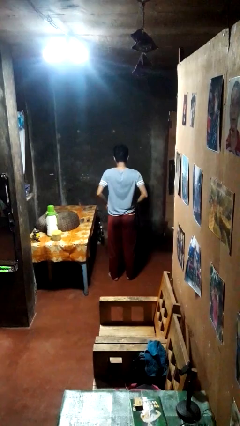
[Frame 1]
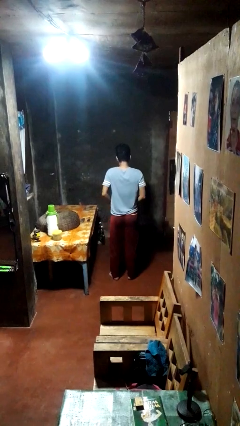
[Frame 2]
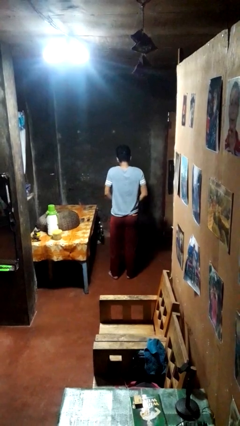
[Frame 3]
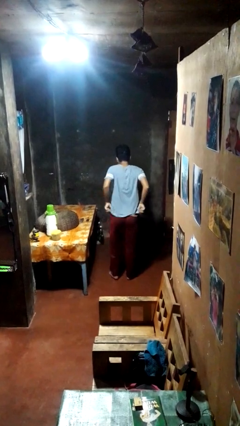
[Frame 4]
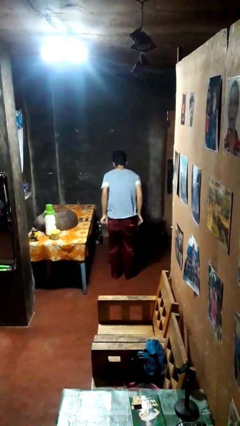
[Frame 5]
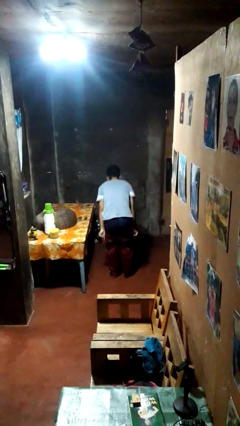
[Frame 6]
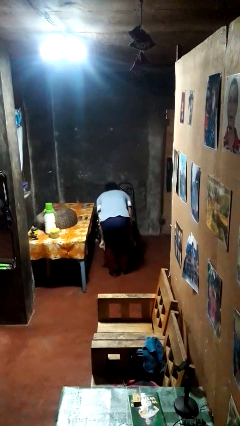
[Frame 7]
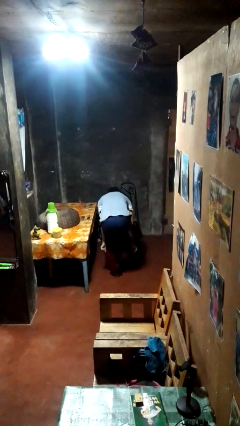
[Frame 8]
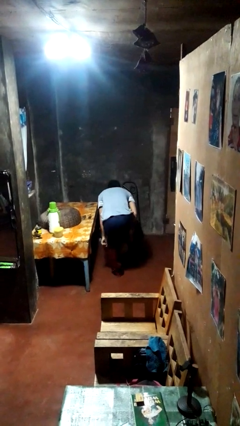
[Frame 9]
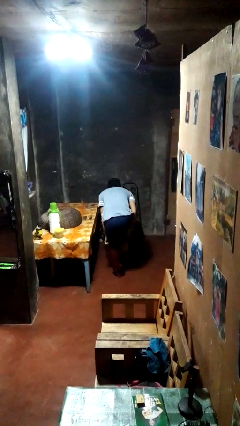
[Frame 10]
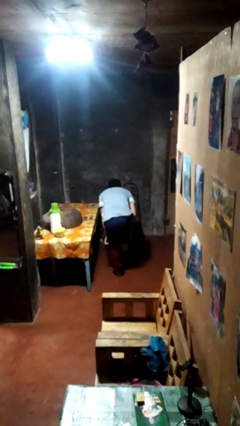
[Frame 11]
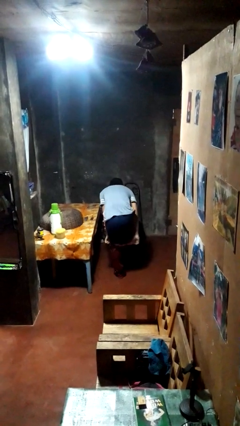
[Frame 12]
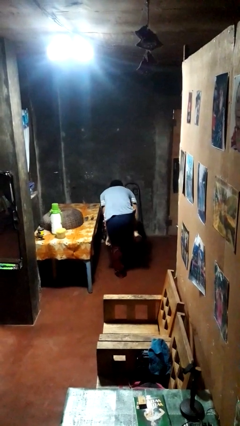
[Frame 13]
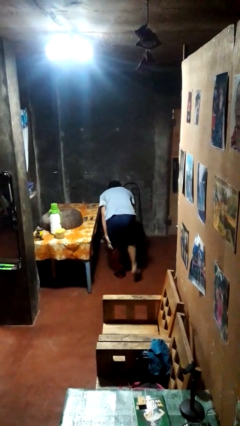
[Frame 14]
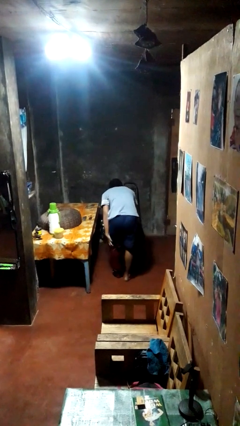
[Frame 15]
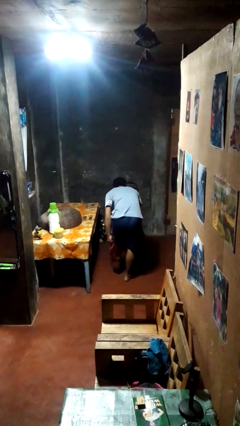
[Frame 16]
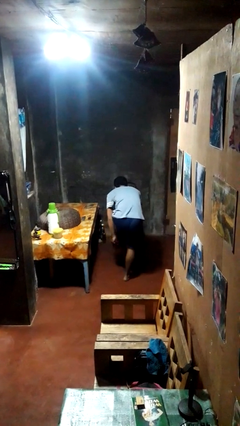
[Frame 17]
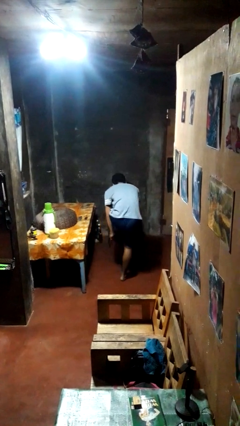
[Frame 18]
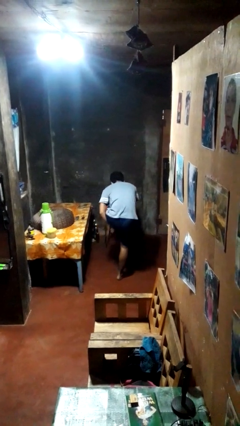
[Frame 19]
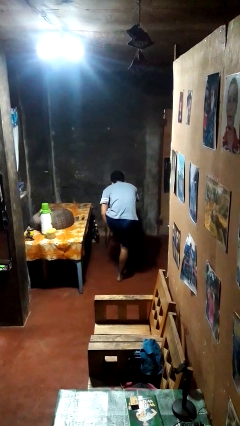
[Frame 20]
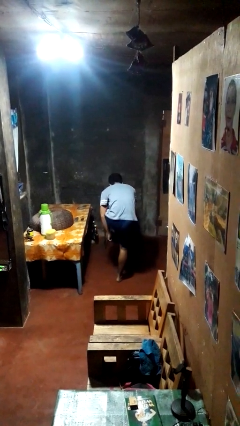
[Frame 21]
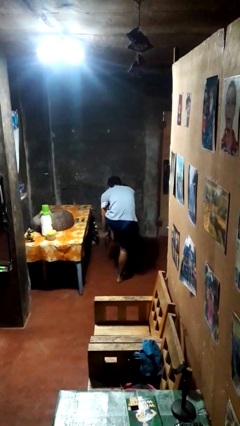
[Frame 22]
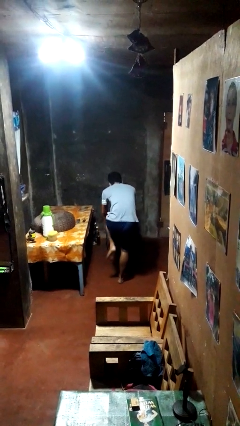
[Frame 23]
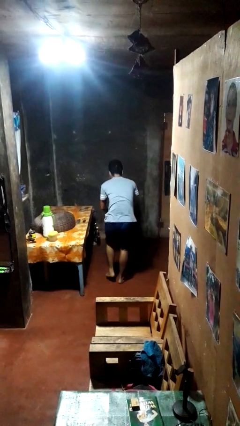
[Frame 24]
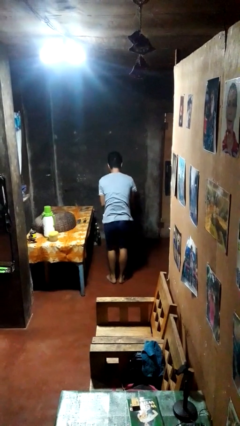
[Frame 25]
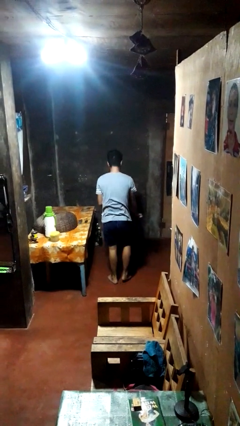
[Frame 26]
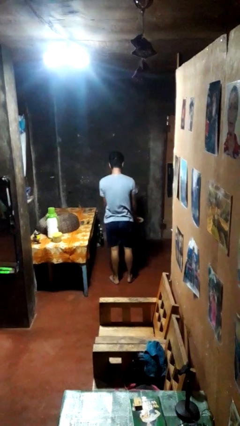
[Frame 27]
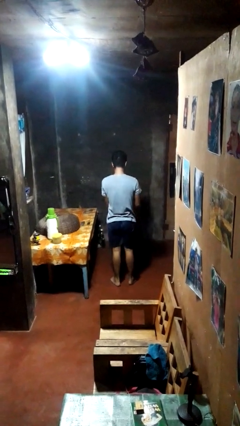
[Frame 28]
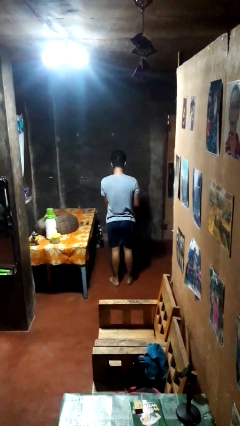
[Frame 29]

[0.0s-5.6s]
person takes off pants

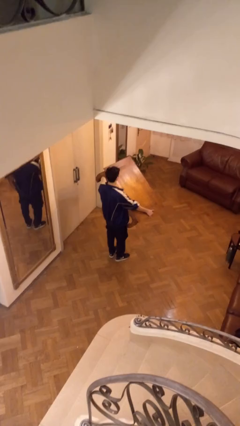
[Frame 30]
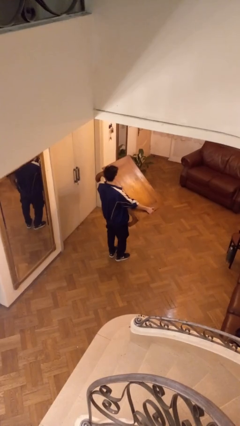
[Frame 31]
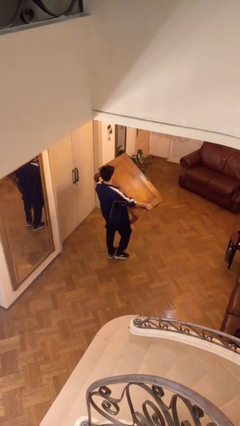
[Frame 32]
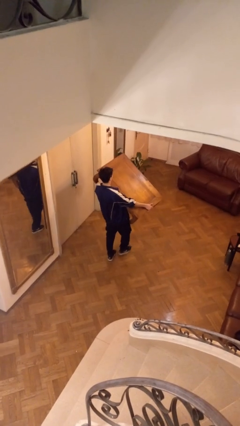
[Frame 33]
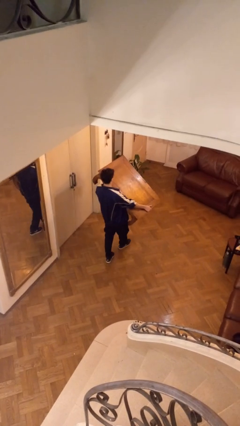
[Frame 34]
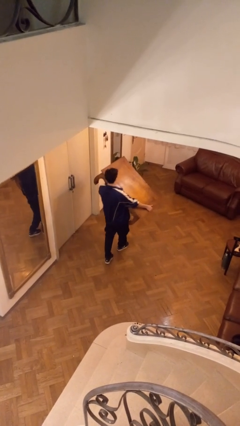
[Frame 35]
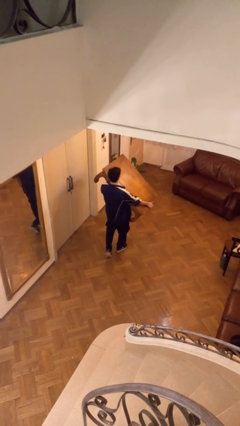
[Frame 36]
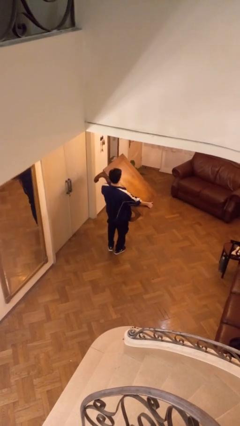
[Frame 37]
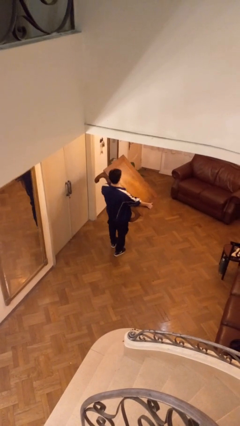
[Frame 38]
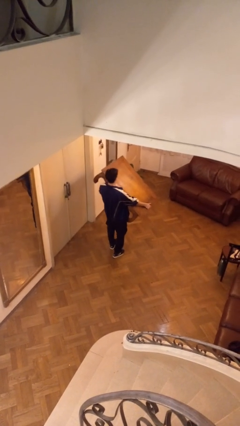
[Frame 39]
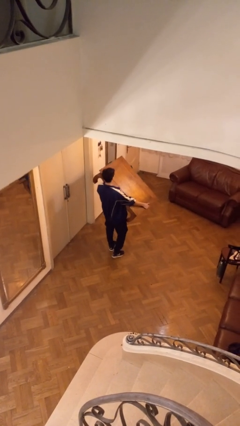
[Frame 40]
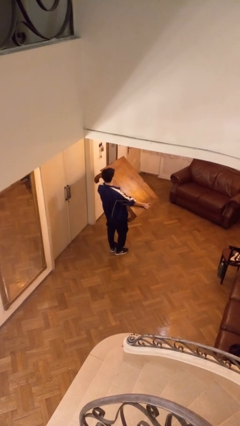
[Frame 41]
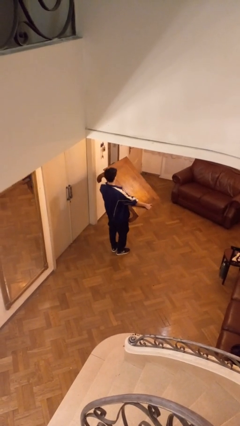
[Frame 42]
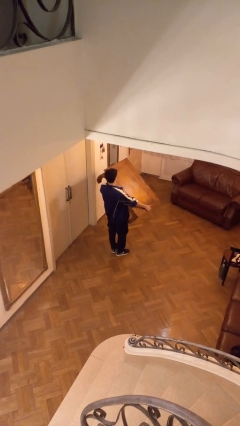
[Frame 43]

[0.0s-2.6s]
person carries furniture

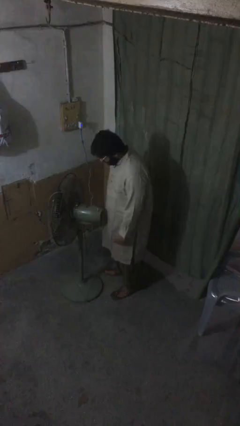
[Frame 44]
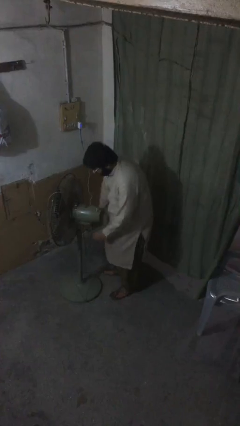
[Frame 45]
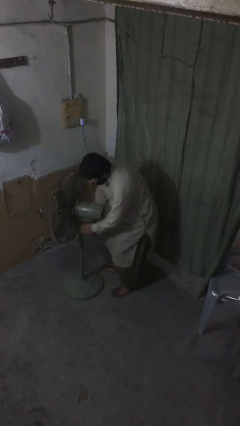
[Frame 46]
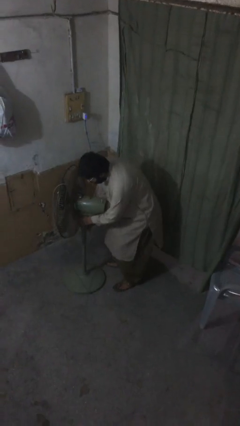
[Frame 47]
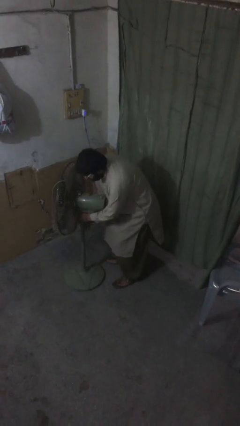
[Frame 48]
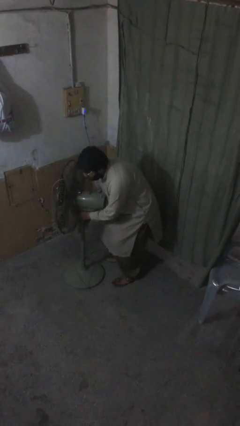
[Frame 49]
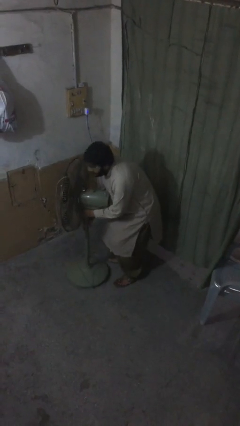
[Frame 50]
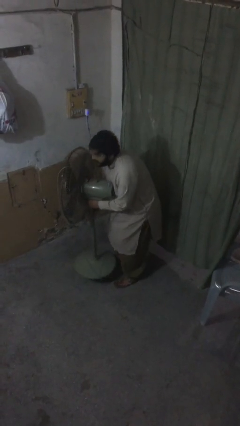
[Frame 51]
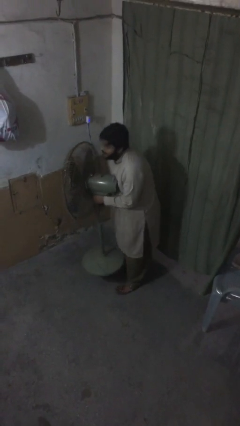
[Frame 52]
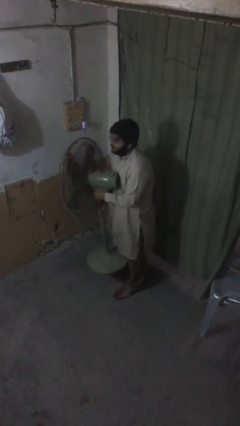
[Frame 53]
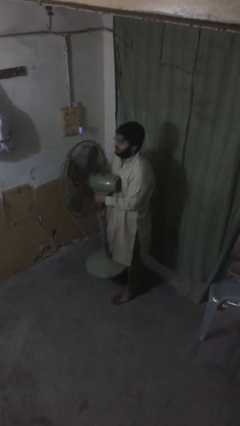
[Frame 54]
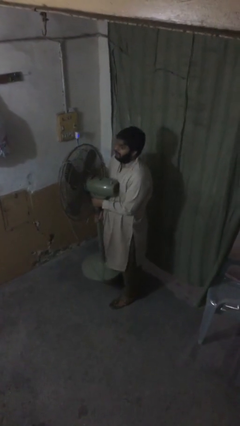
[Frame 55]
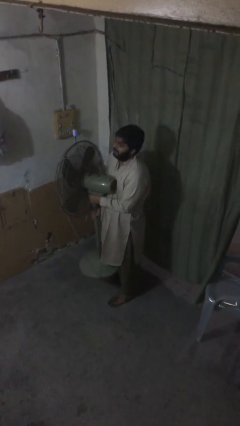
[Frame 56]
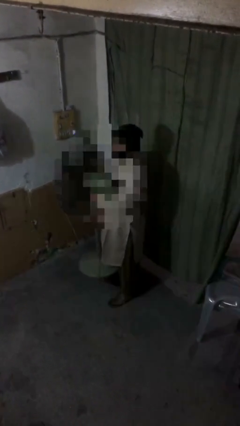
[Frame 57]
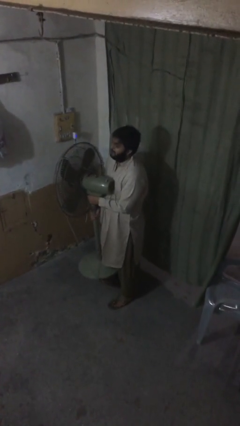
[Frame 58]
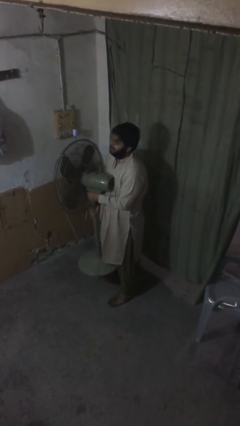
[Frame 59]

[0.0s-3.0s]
person picks up object from floor

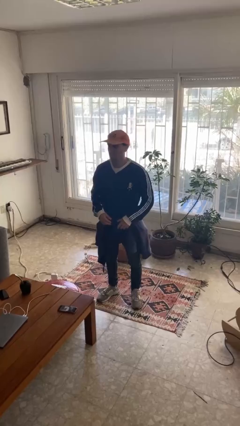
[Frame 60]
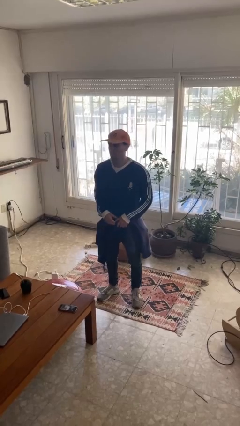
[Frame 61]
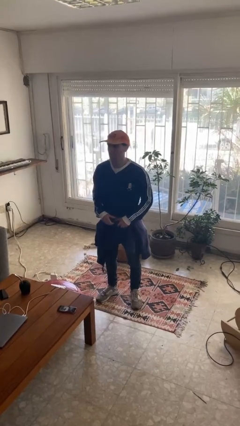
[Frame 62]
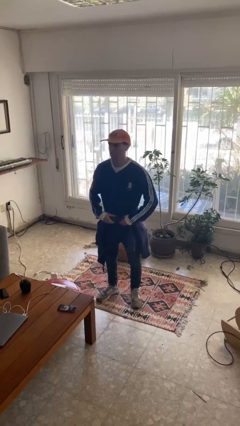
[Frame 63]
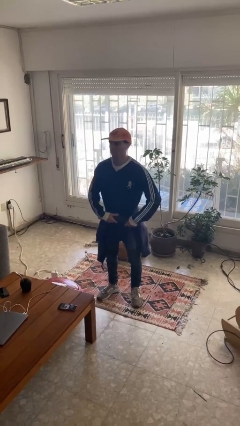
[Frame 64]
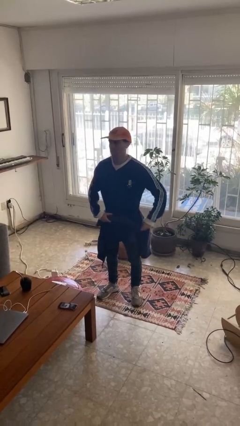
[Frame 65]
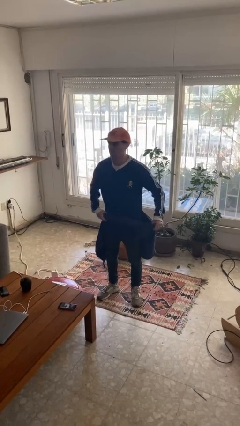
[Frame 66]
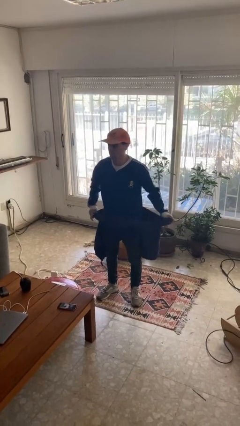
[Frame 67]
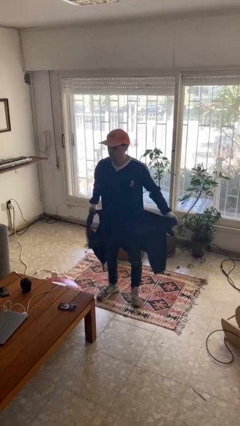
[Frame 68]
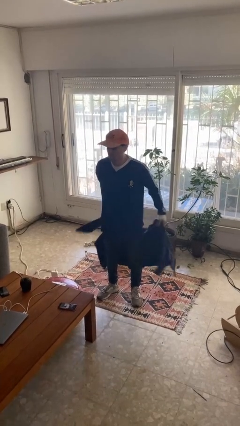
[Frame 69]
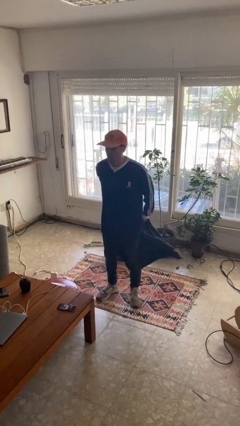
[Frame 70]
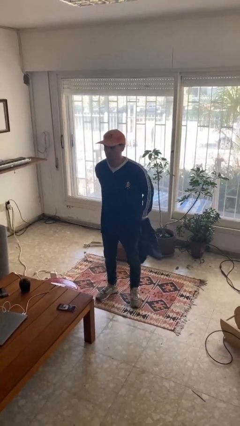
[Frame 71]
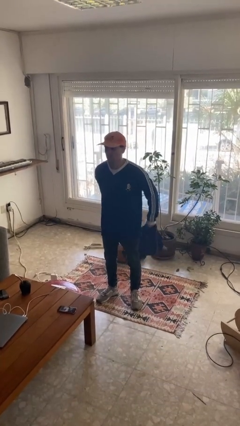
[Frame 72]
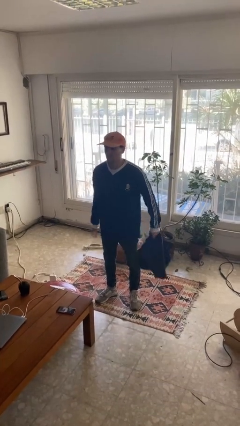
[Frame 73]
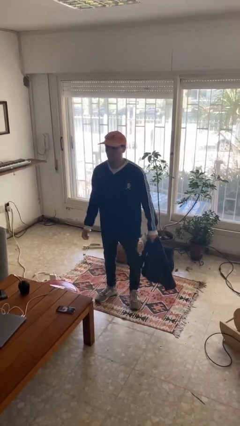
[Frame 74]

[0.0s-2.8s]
person unties jacket around waist

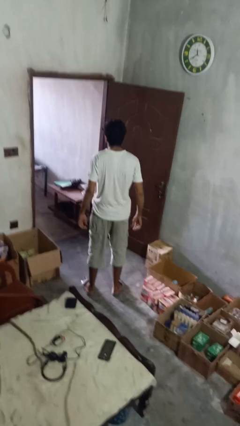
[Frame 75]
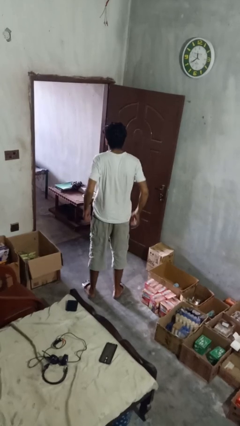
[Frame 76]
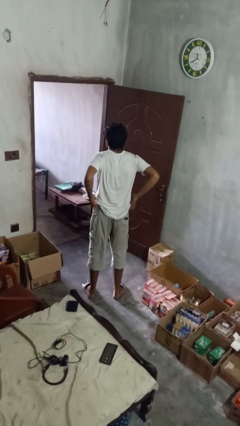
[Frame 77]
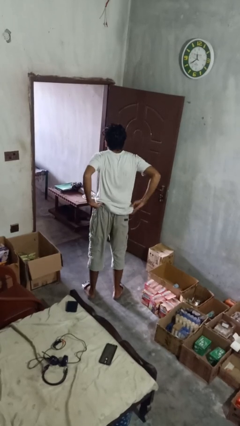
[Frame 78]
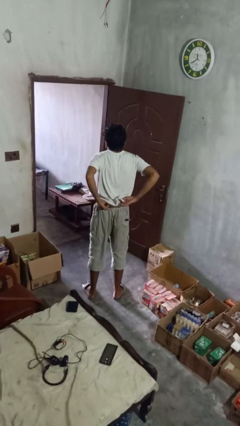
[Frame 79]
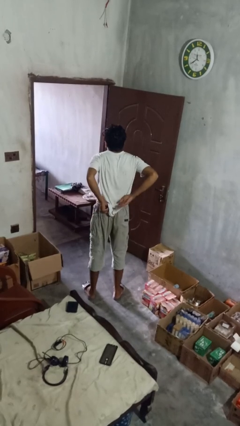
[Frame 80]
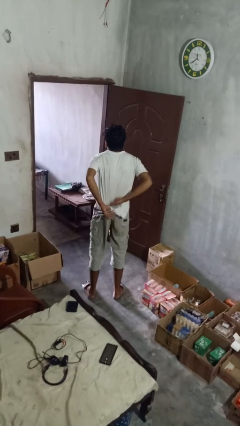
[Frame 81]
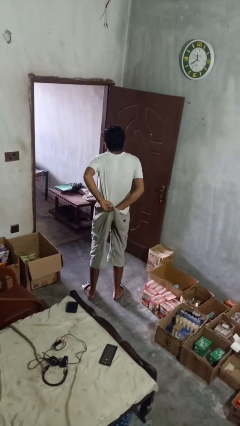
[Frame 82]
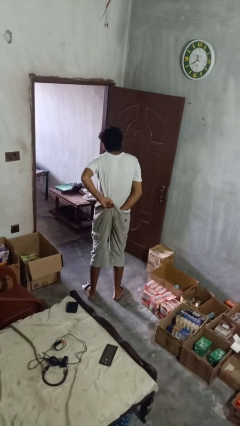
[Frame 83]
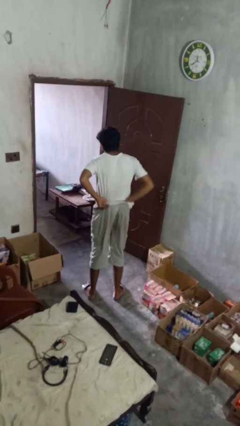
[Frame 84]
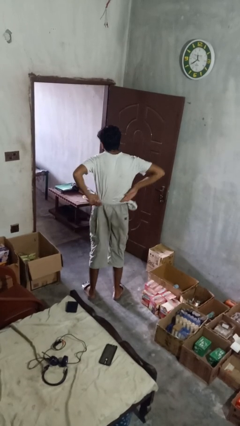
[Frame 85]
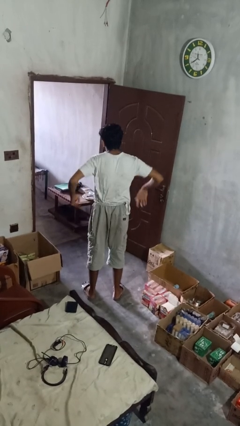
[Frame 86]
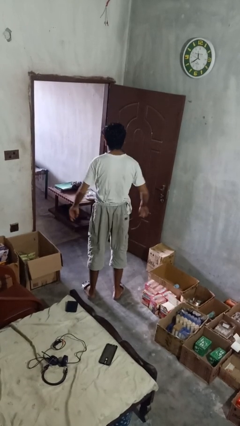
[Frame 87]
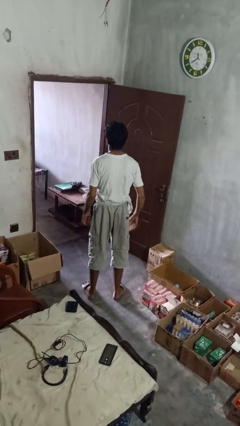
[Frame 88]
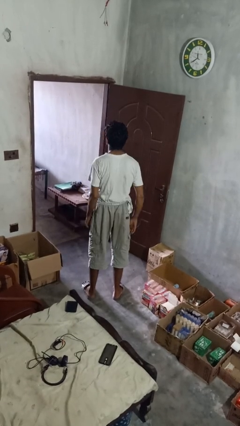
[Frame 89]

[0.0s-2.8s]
person tucks in shirt

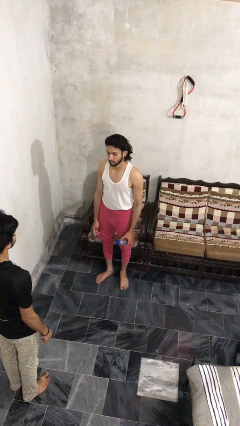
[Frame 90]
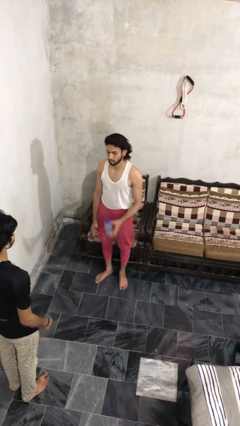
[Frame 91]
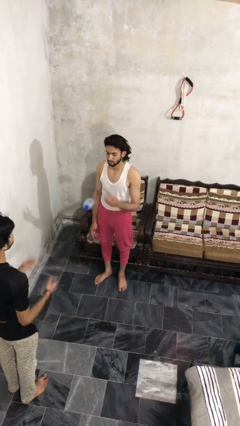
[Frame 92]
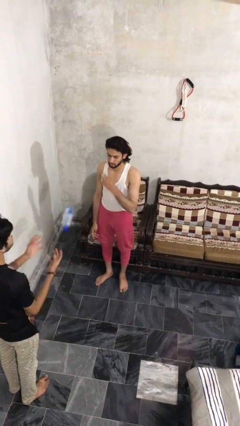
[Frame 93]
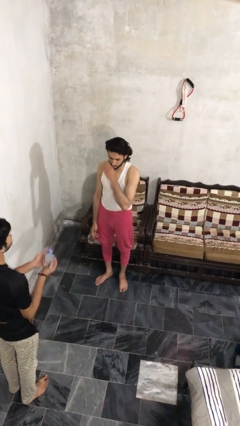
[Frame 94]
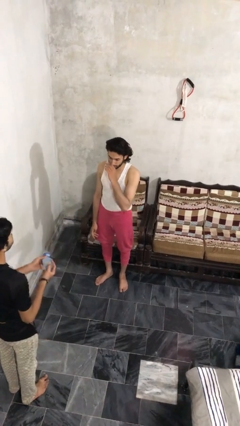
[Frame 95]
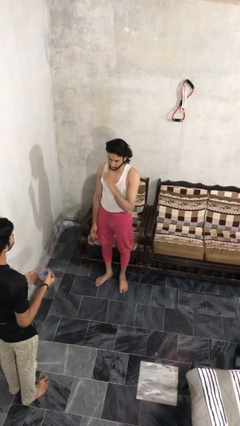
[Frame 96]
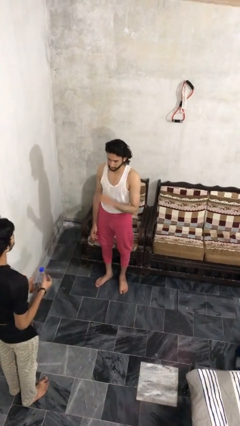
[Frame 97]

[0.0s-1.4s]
person throws object to person
